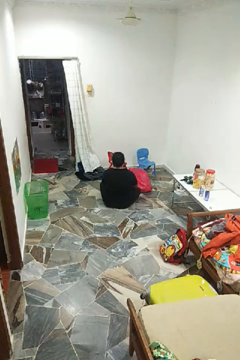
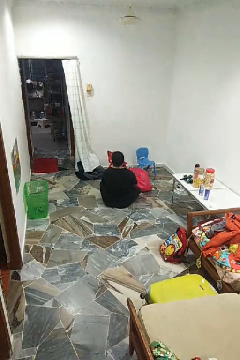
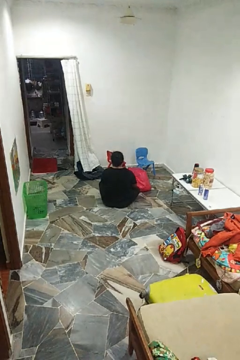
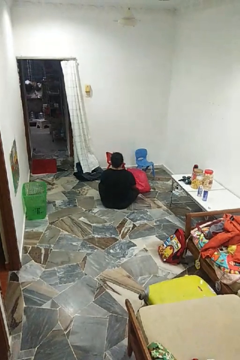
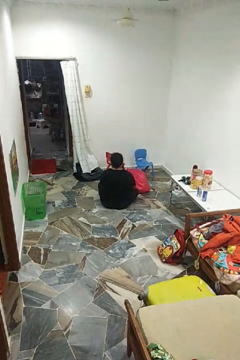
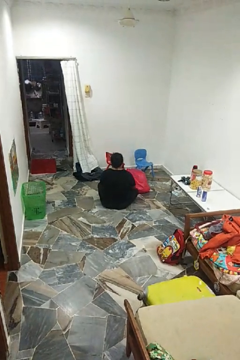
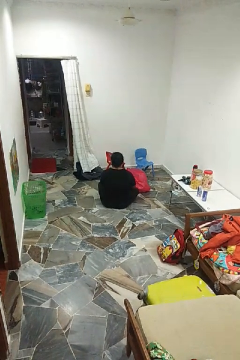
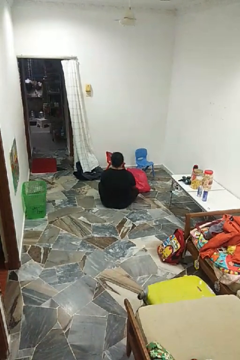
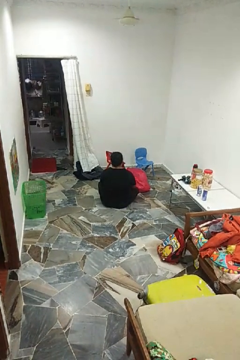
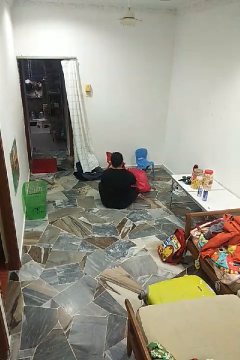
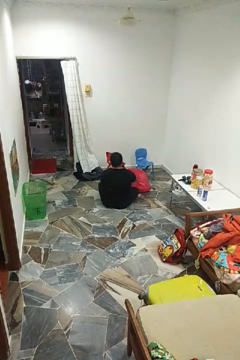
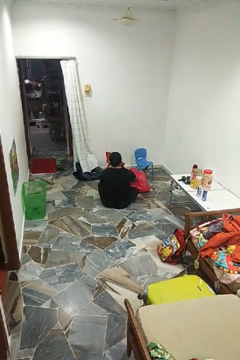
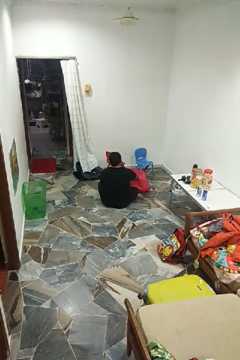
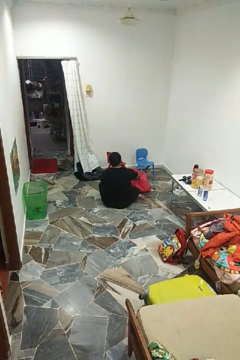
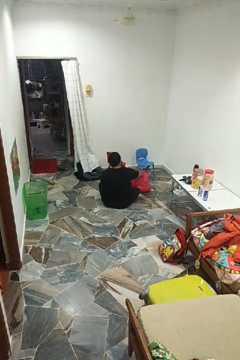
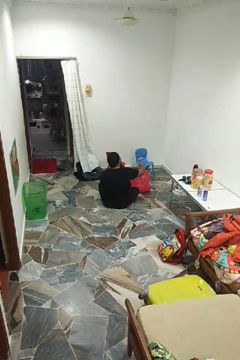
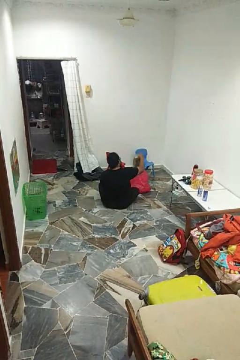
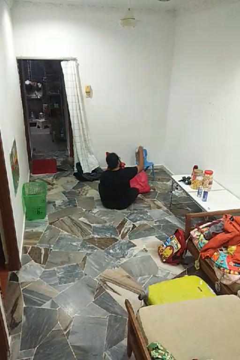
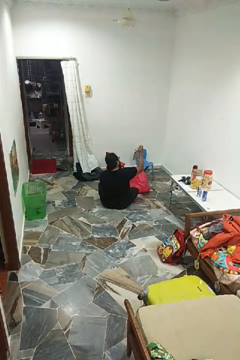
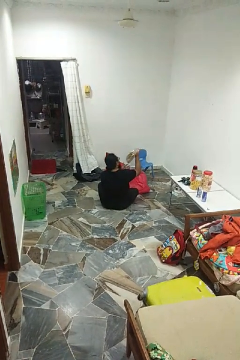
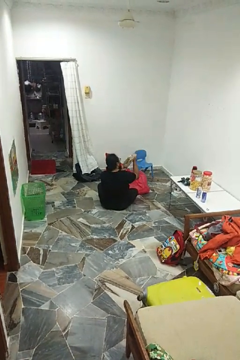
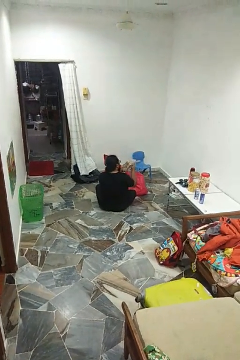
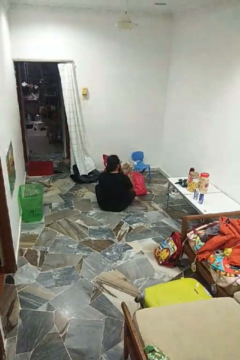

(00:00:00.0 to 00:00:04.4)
person takes object from bag

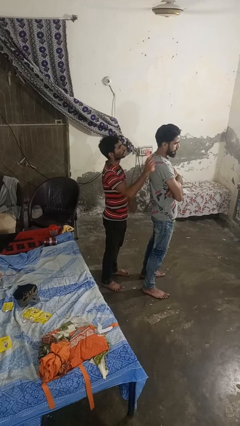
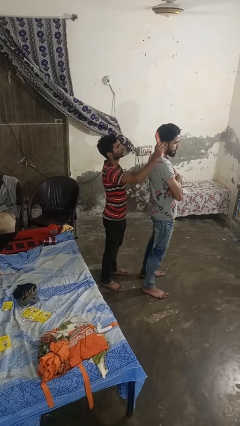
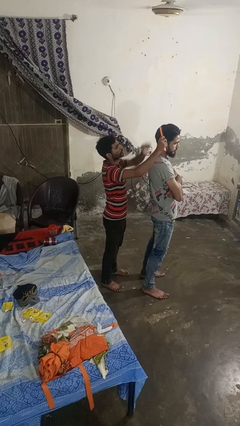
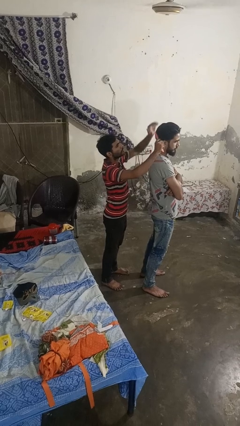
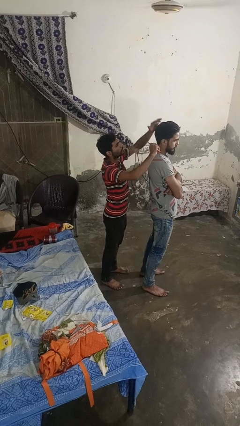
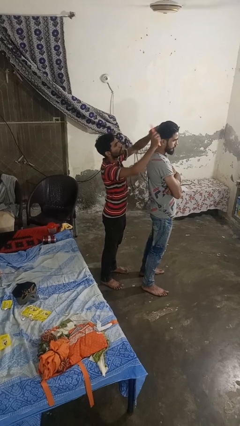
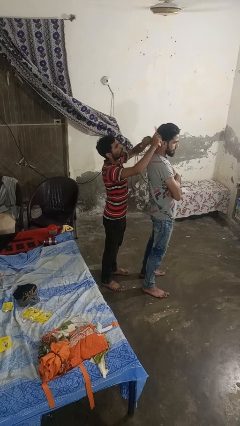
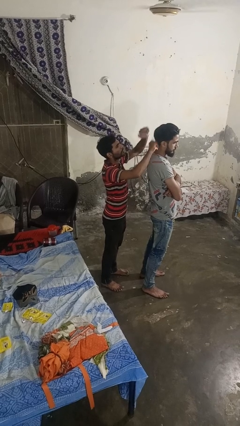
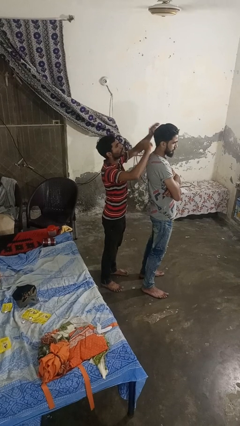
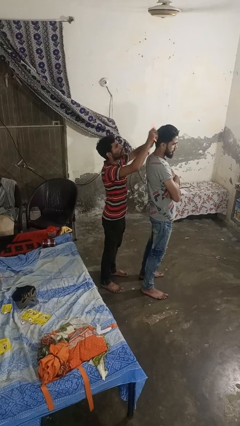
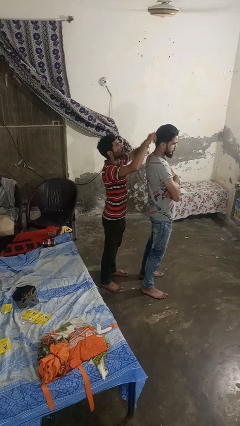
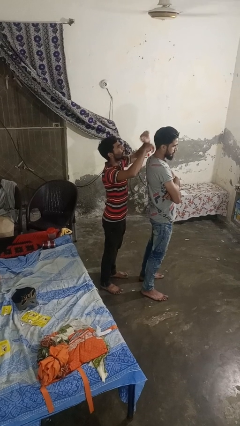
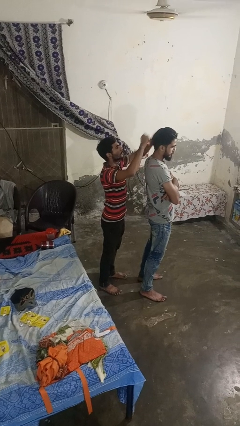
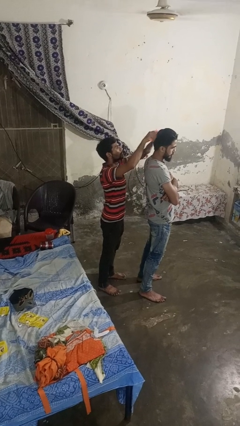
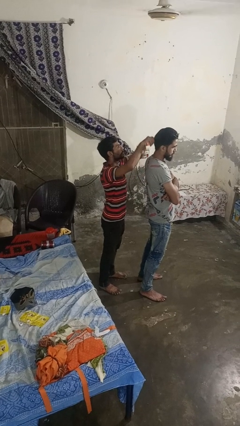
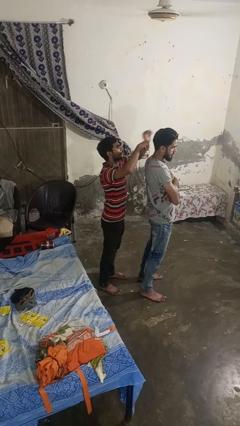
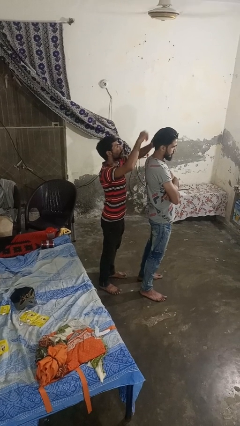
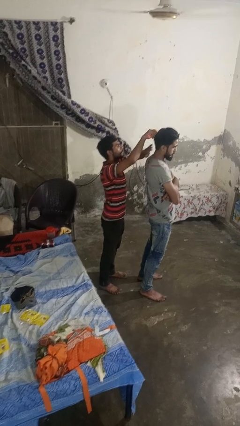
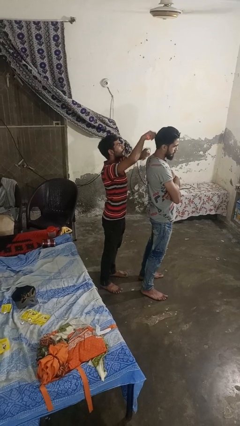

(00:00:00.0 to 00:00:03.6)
person brushes hair of person

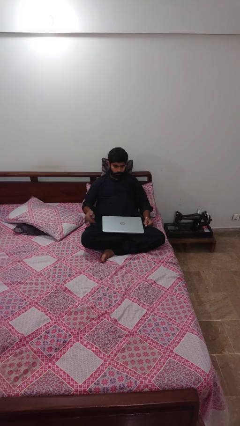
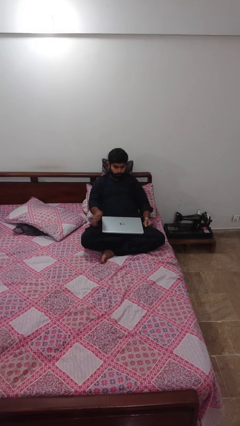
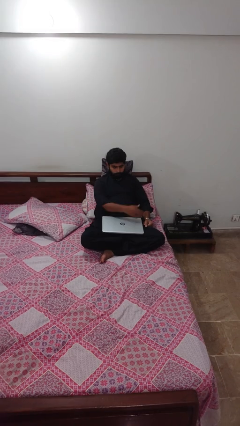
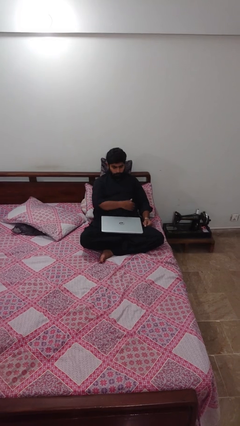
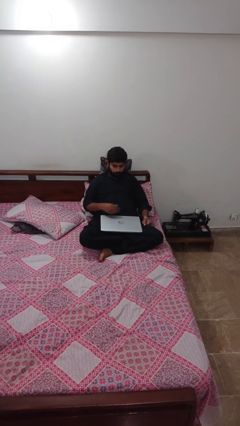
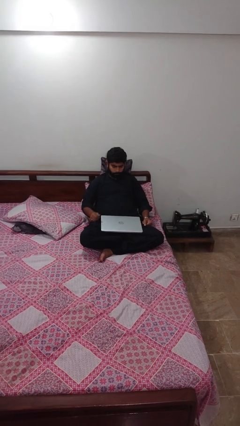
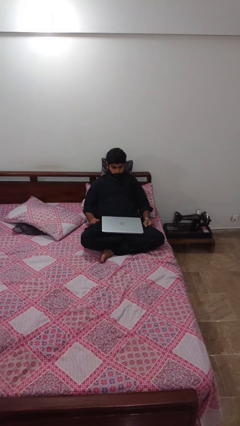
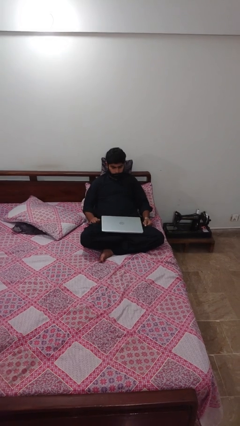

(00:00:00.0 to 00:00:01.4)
person waves hand over object

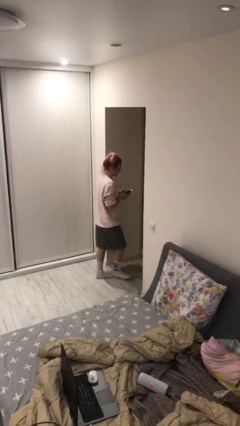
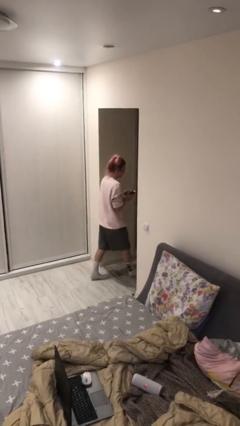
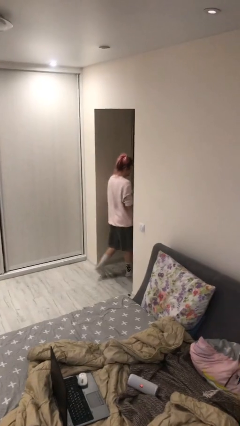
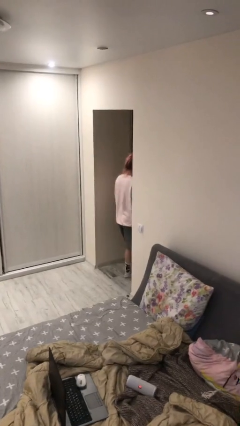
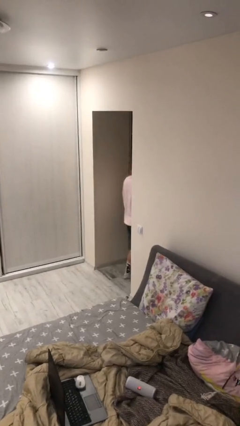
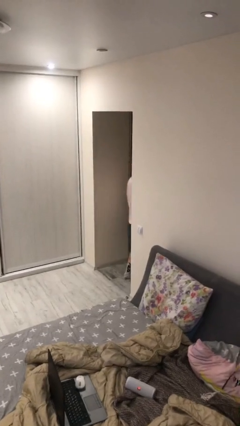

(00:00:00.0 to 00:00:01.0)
person exits scene through structure

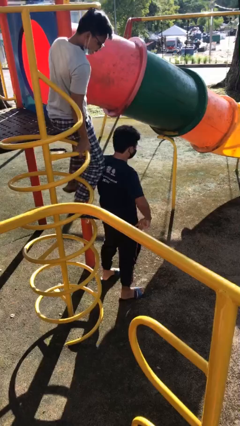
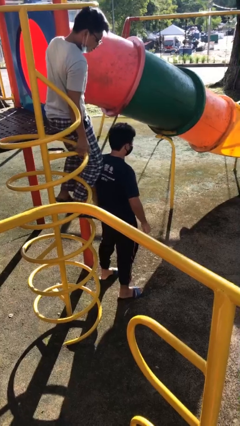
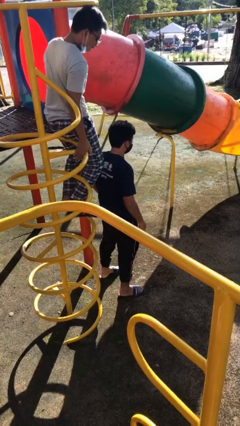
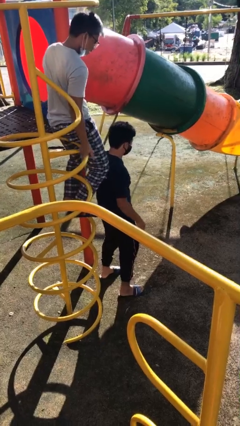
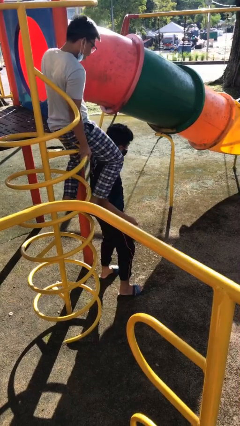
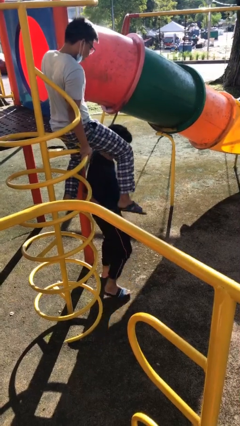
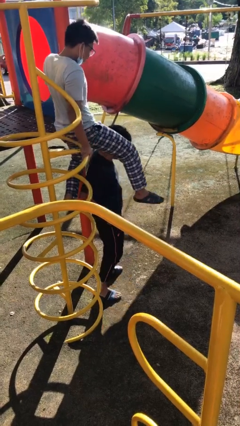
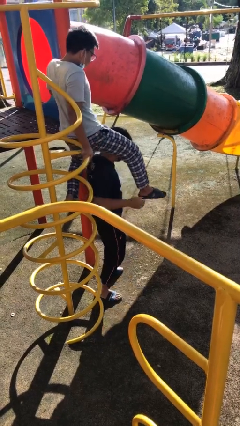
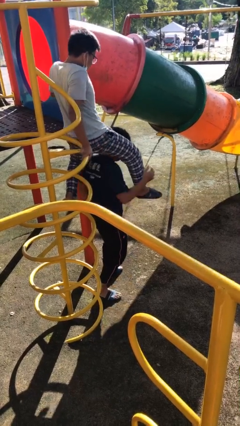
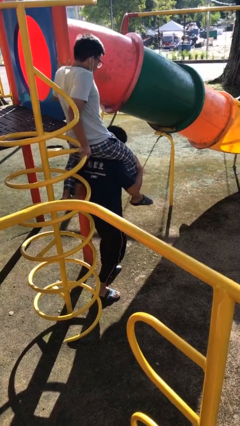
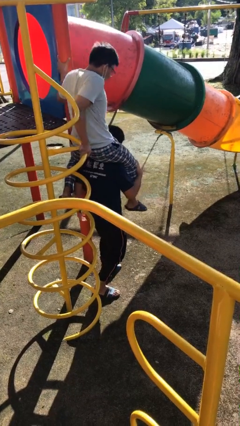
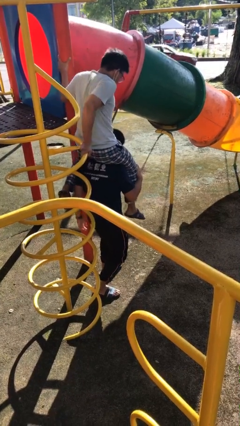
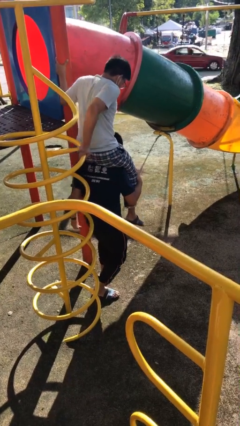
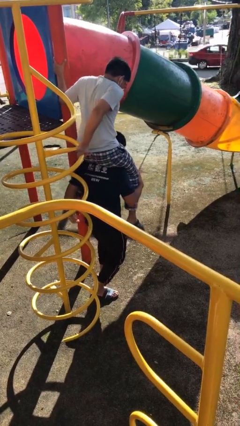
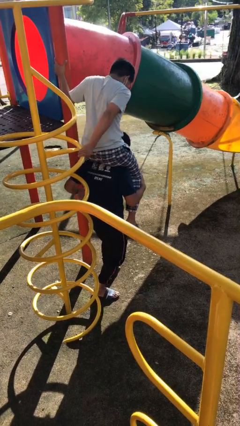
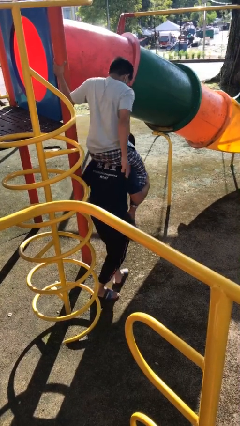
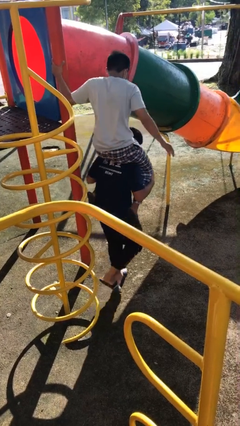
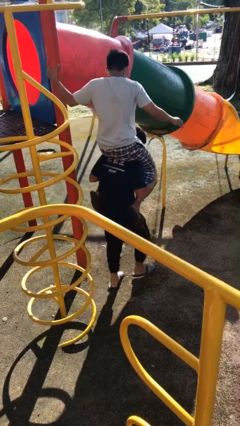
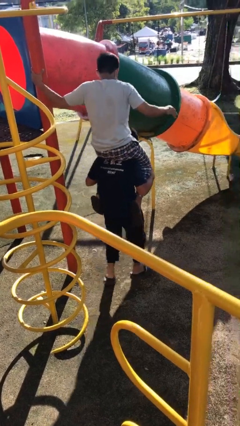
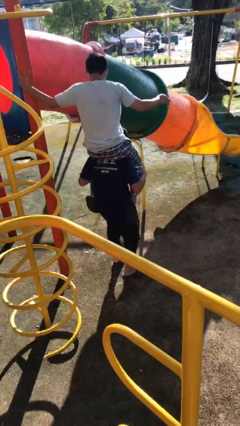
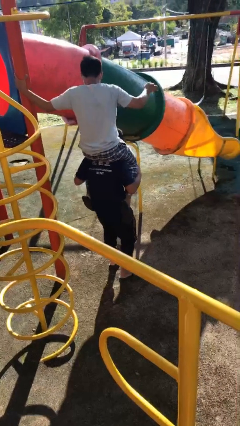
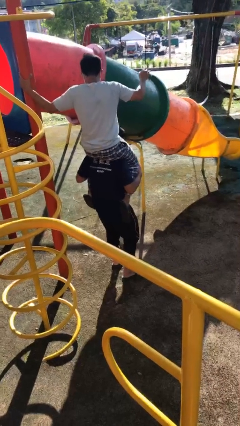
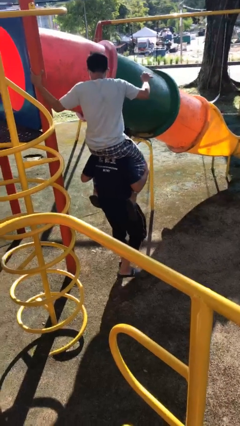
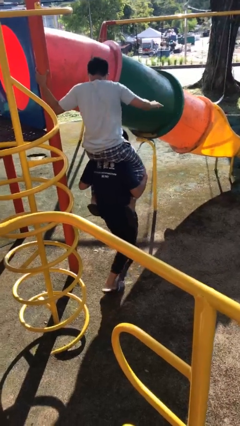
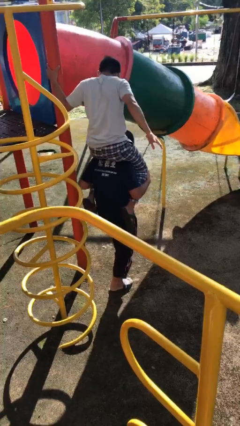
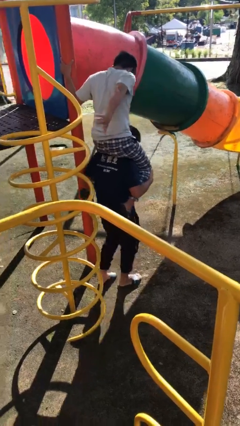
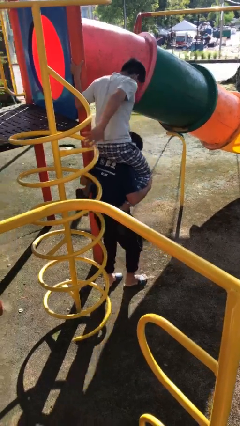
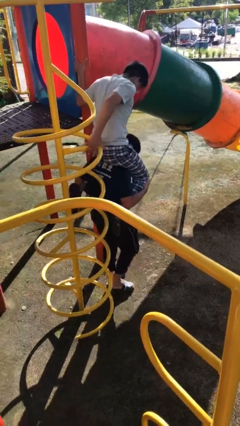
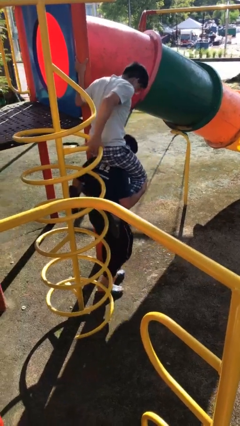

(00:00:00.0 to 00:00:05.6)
person carries person on shoulders

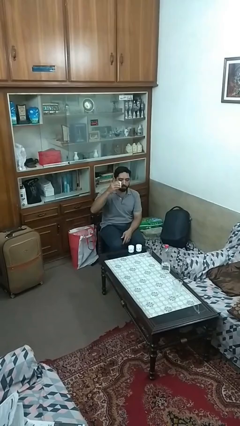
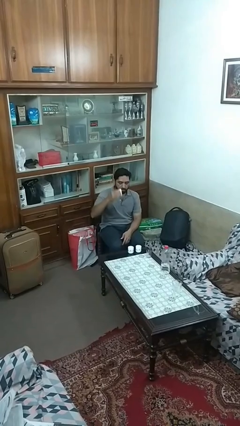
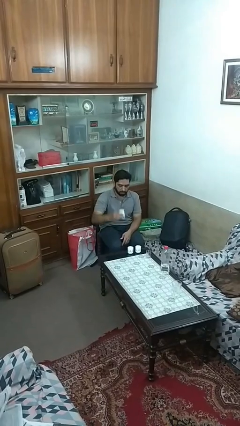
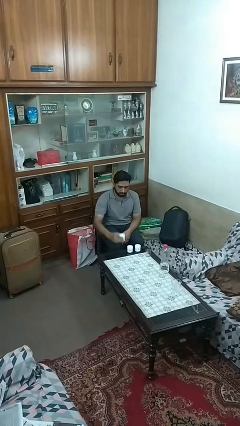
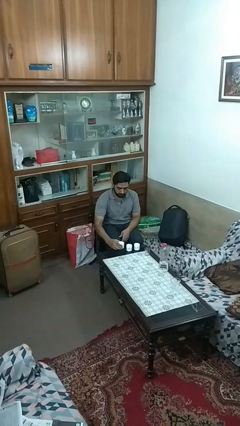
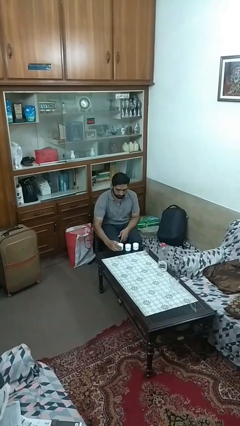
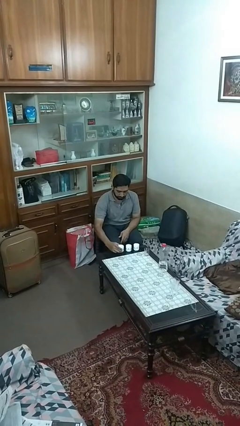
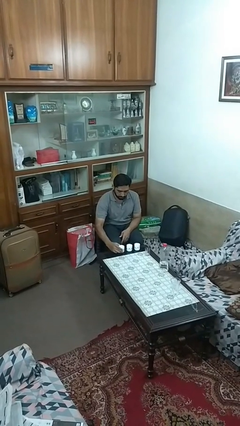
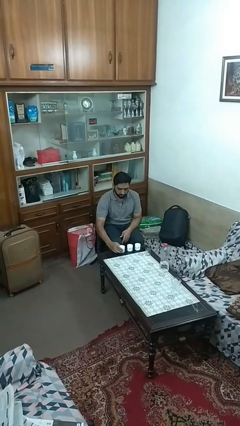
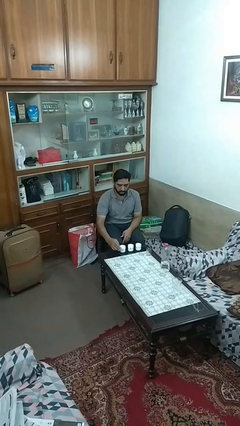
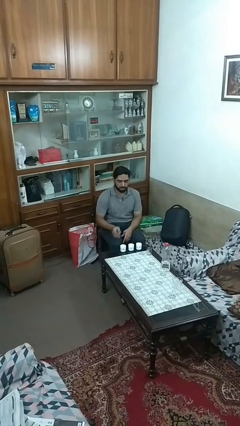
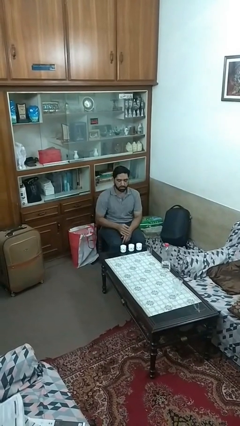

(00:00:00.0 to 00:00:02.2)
person puts down object on table
